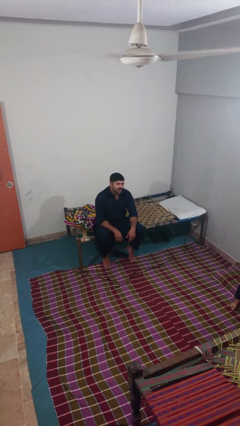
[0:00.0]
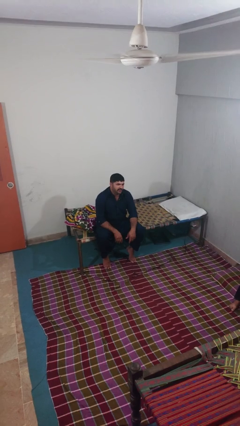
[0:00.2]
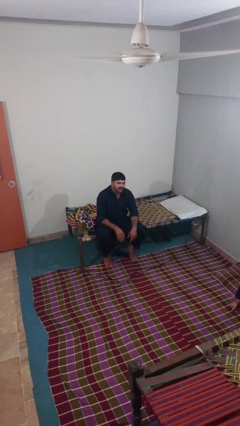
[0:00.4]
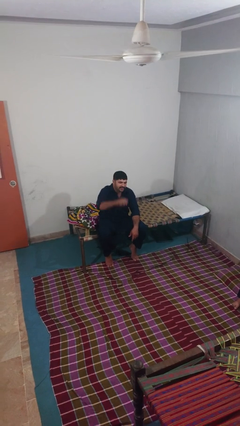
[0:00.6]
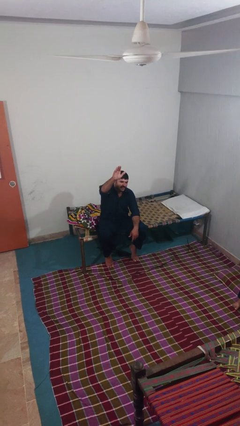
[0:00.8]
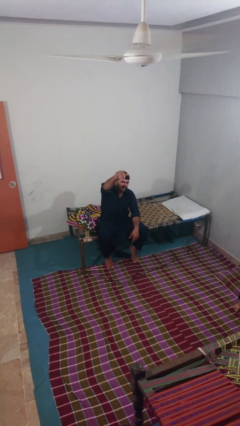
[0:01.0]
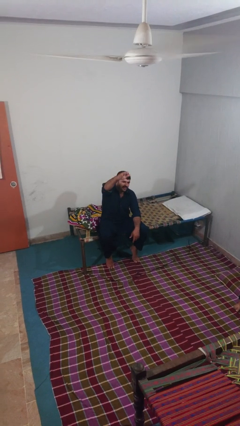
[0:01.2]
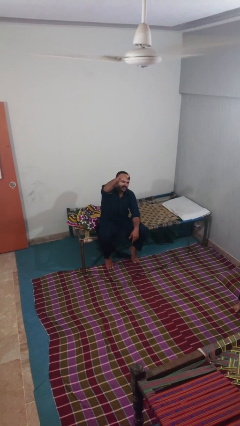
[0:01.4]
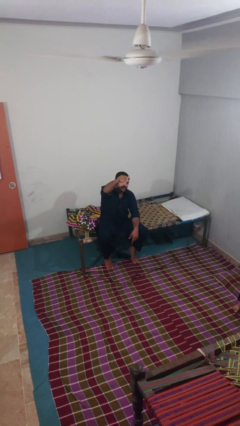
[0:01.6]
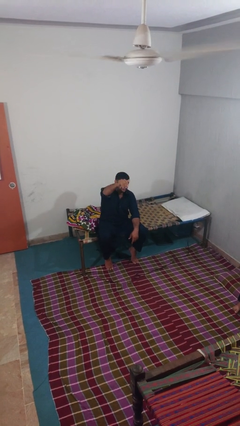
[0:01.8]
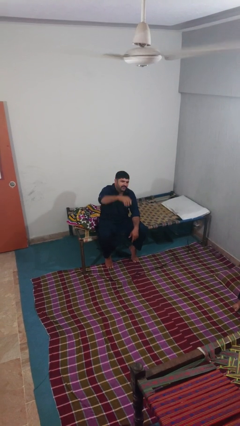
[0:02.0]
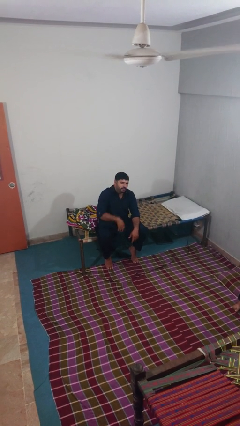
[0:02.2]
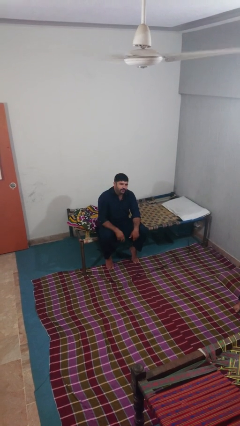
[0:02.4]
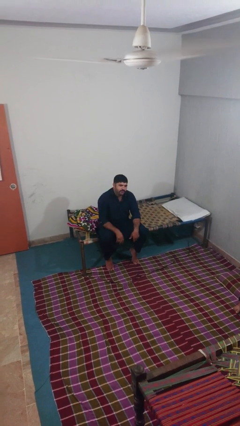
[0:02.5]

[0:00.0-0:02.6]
person gestures come here

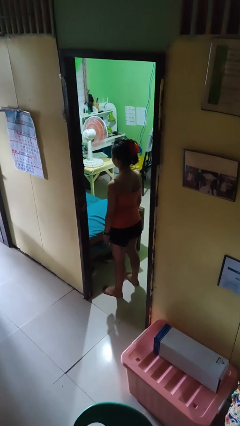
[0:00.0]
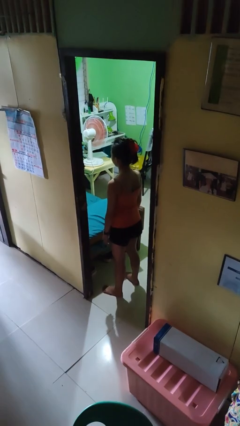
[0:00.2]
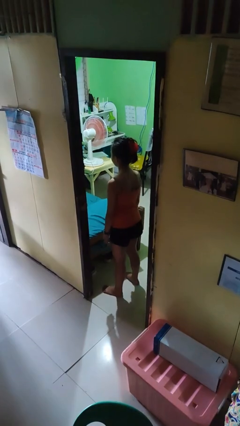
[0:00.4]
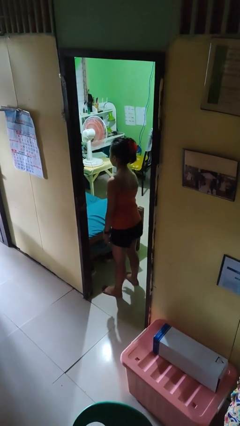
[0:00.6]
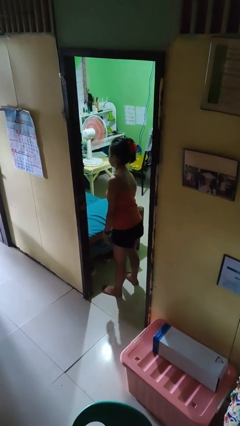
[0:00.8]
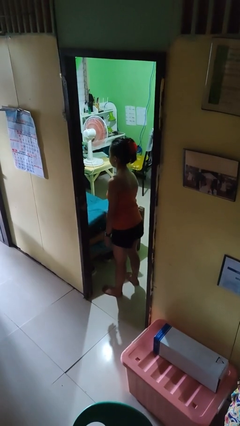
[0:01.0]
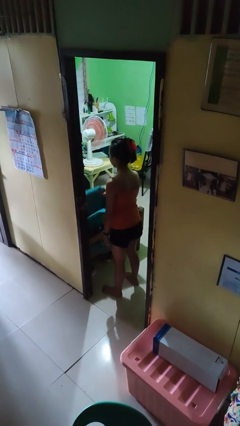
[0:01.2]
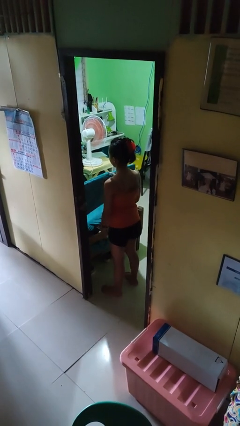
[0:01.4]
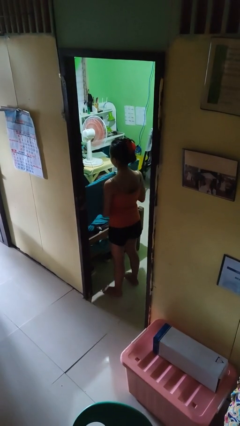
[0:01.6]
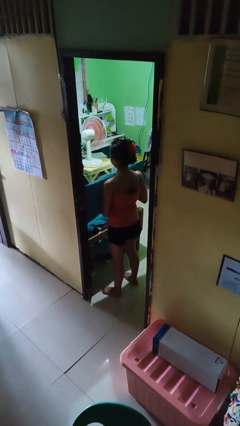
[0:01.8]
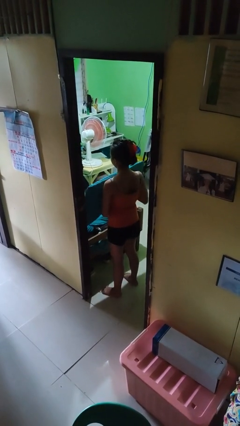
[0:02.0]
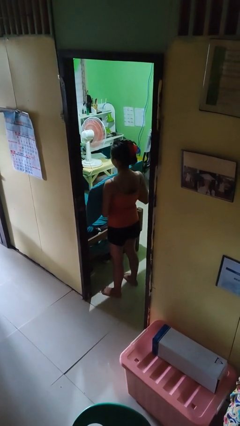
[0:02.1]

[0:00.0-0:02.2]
person picks up object from bed

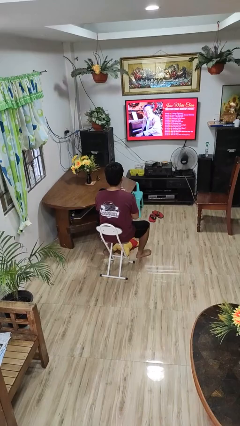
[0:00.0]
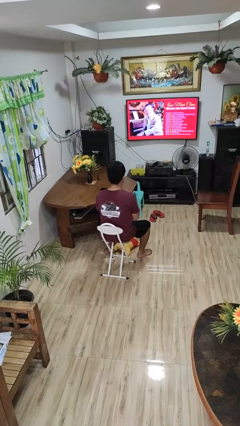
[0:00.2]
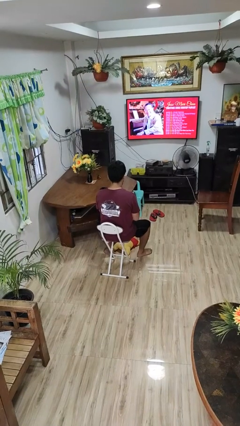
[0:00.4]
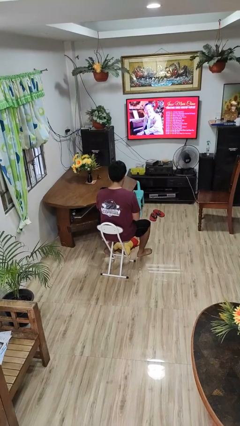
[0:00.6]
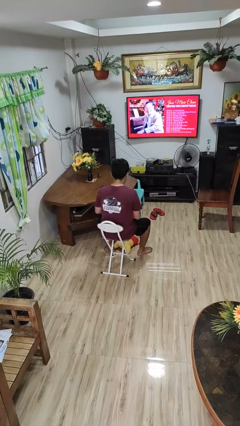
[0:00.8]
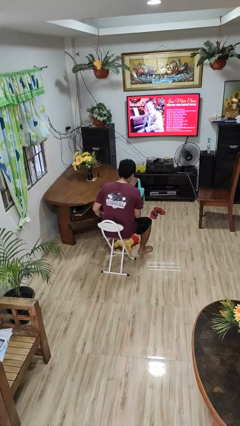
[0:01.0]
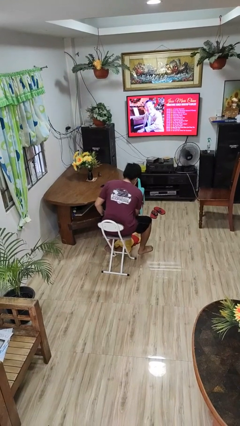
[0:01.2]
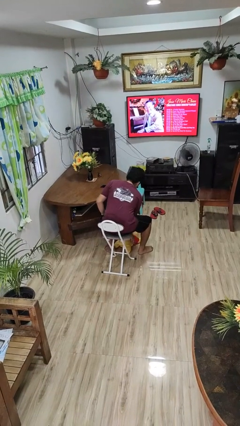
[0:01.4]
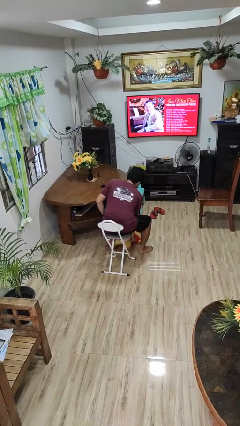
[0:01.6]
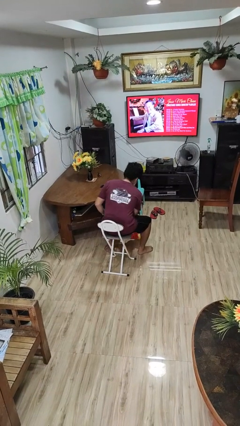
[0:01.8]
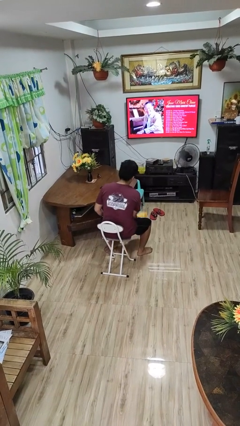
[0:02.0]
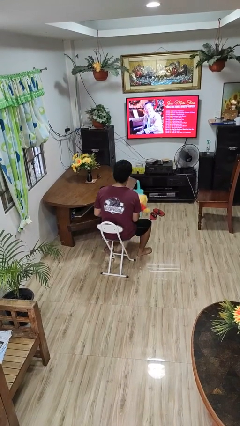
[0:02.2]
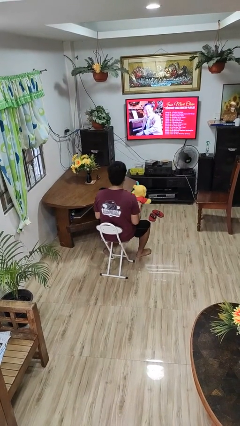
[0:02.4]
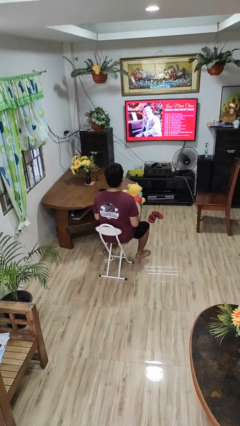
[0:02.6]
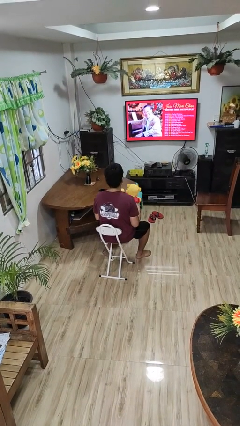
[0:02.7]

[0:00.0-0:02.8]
person picks up object from floor

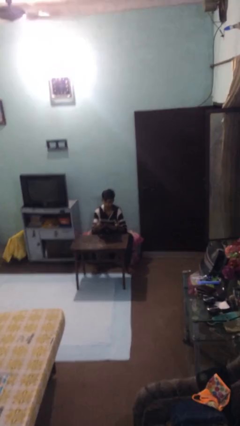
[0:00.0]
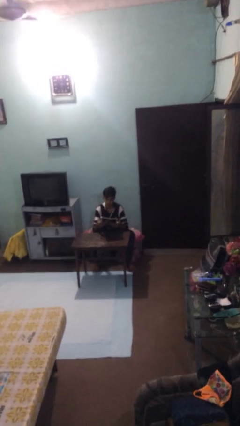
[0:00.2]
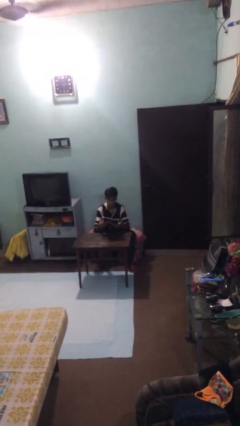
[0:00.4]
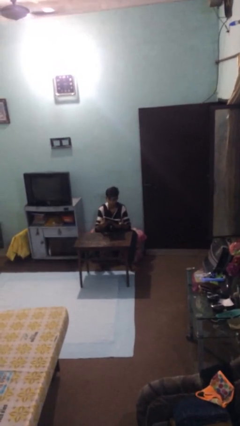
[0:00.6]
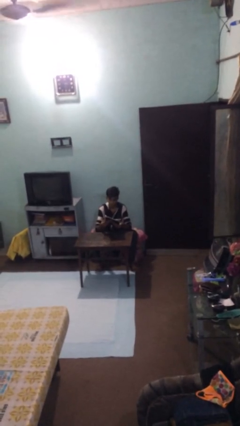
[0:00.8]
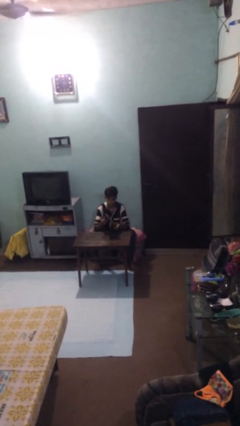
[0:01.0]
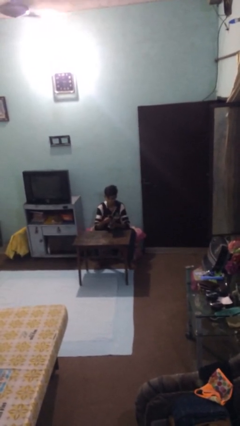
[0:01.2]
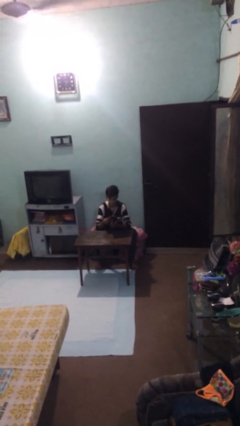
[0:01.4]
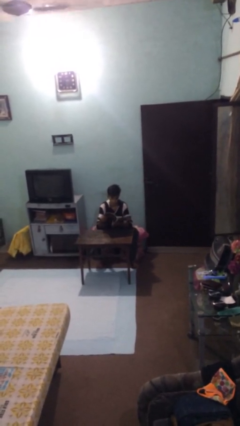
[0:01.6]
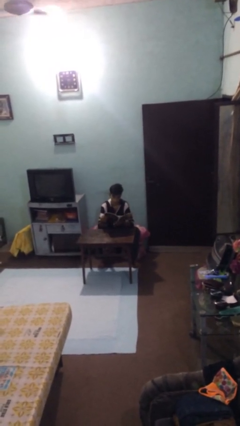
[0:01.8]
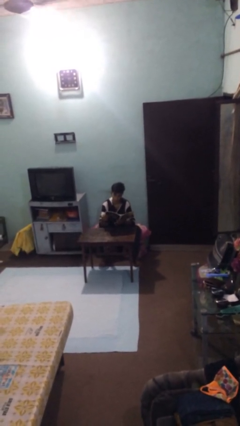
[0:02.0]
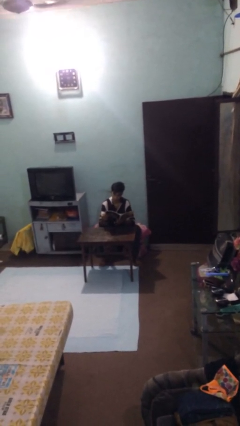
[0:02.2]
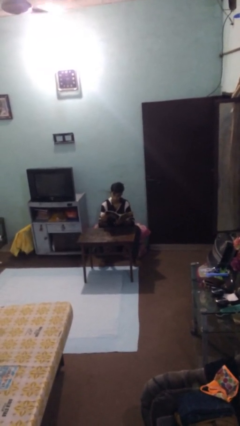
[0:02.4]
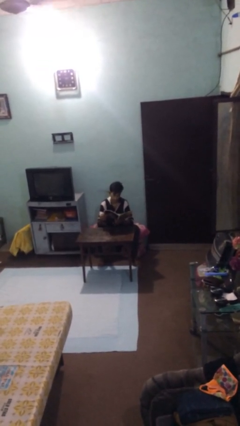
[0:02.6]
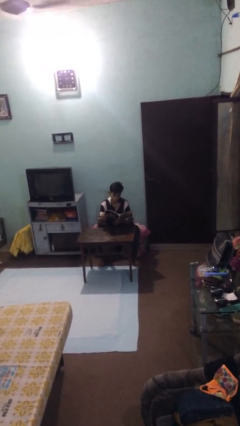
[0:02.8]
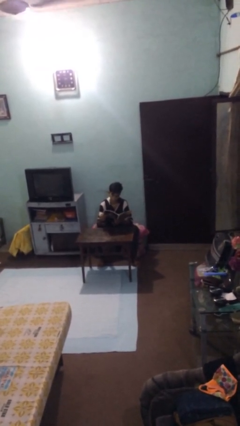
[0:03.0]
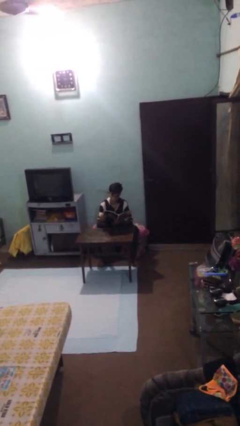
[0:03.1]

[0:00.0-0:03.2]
person reads document

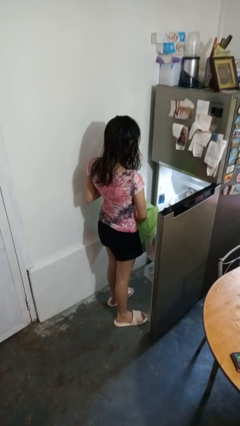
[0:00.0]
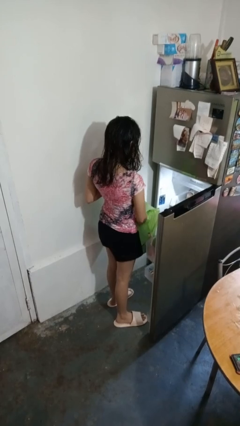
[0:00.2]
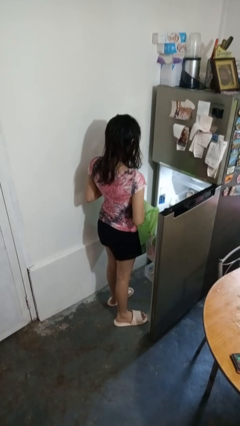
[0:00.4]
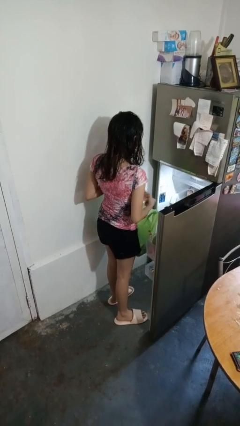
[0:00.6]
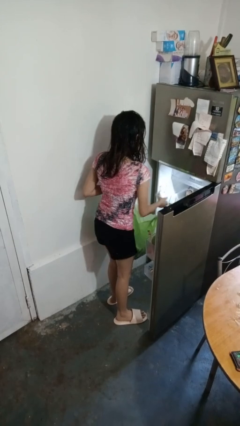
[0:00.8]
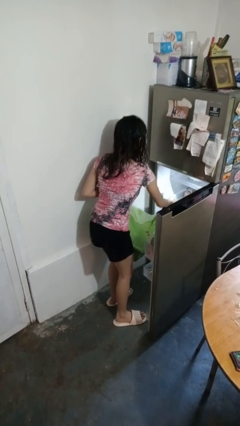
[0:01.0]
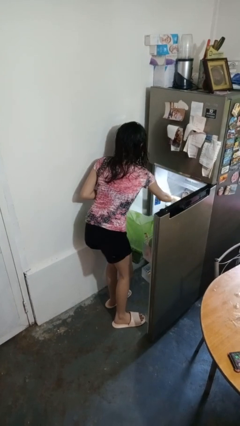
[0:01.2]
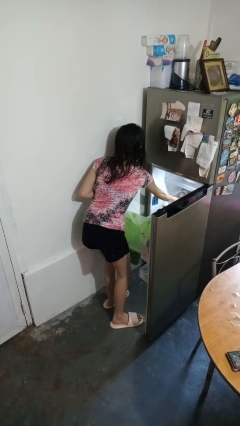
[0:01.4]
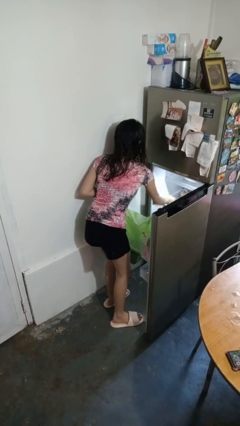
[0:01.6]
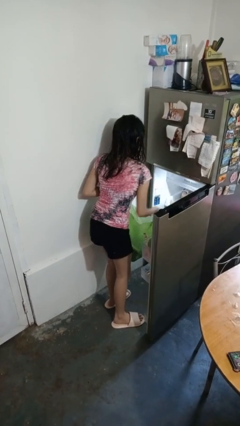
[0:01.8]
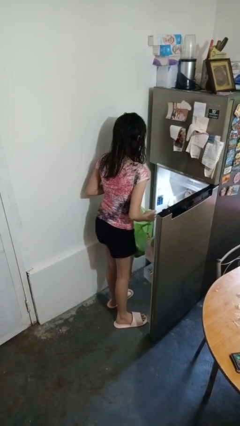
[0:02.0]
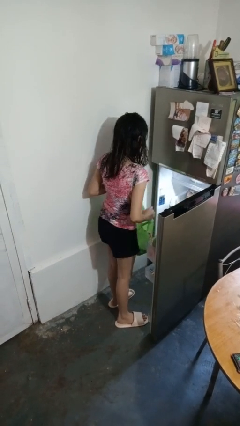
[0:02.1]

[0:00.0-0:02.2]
person loads groceries into refrigerator

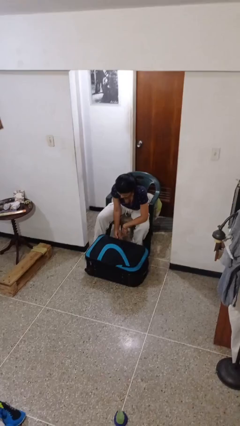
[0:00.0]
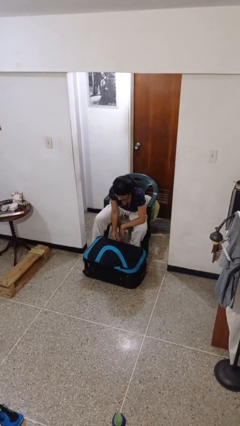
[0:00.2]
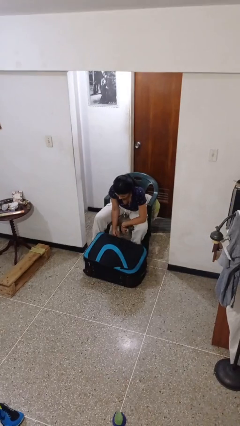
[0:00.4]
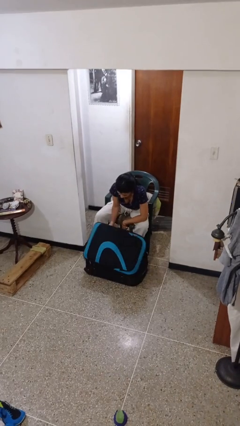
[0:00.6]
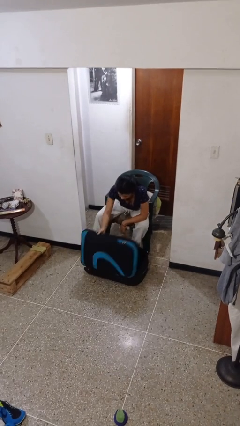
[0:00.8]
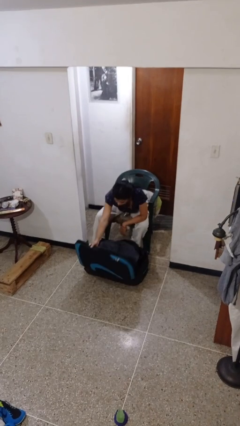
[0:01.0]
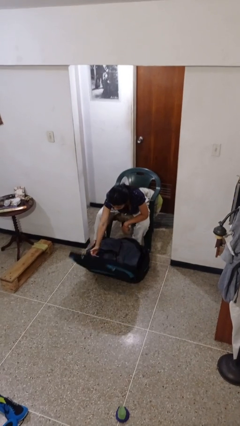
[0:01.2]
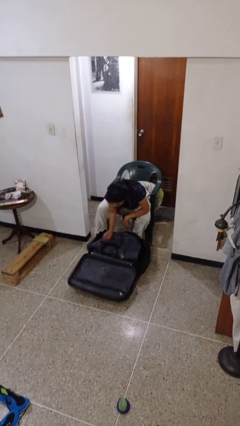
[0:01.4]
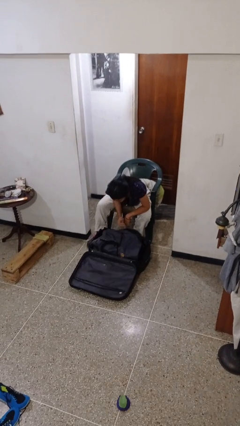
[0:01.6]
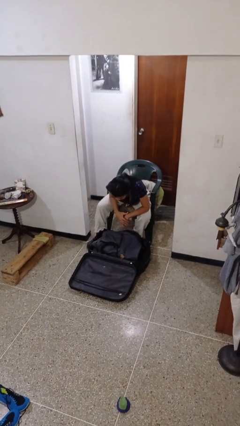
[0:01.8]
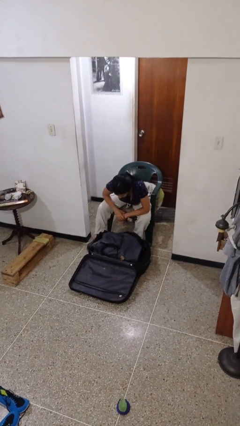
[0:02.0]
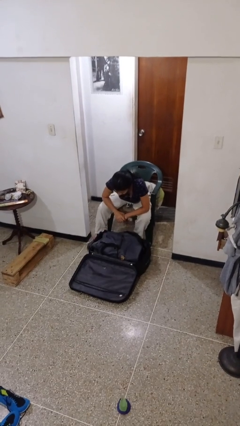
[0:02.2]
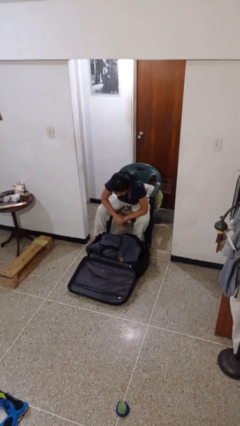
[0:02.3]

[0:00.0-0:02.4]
person opens suitcase

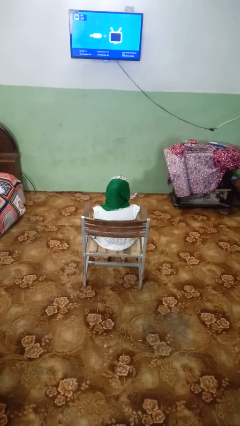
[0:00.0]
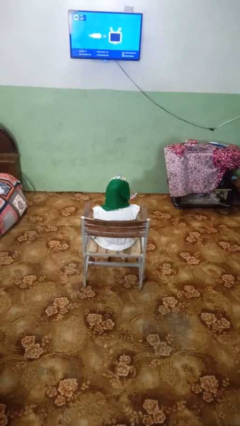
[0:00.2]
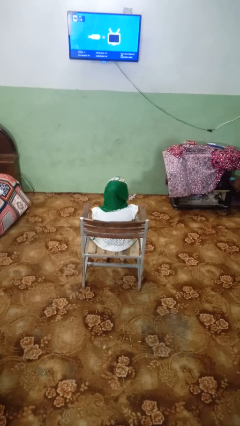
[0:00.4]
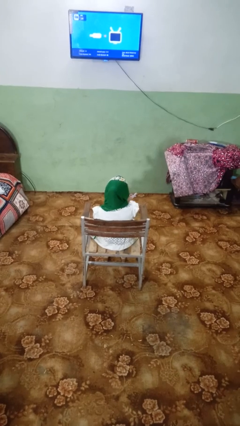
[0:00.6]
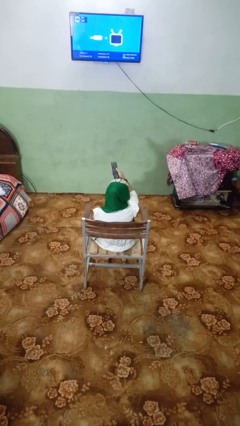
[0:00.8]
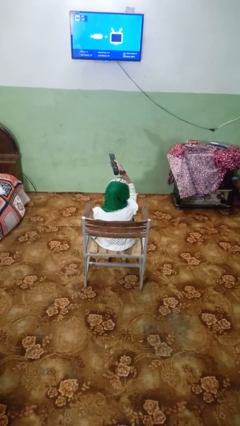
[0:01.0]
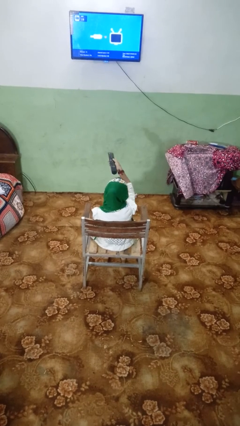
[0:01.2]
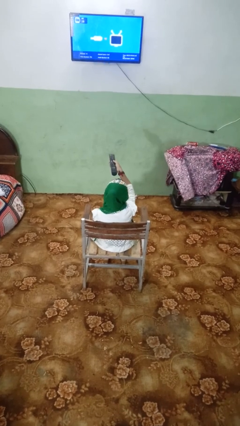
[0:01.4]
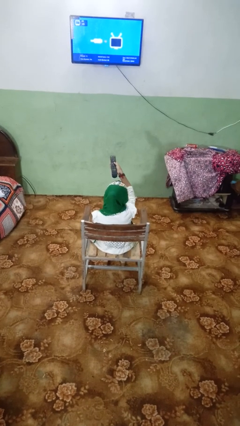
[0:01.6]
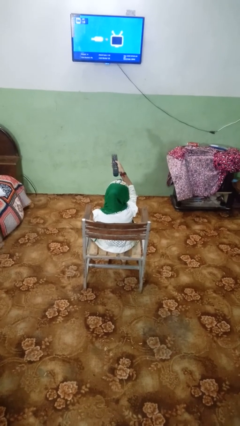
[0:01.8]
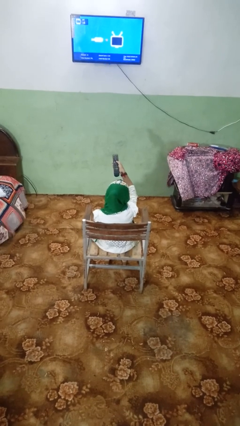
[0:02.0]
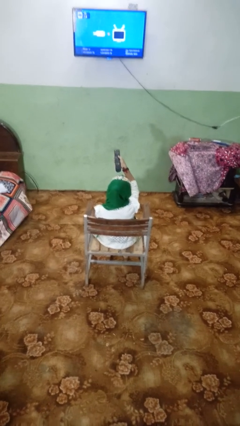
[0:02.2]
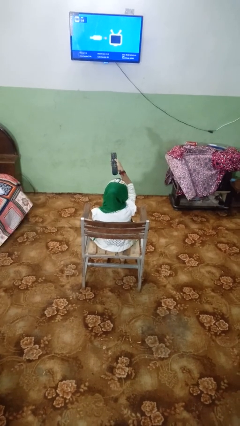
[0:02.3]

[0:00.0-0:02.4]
person uses television remote
